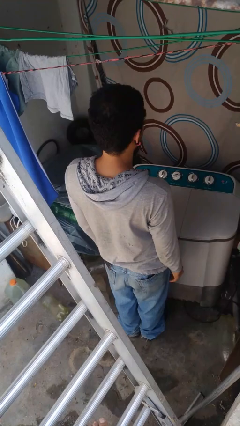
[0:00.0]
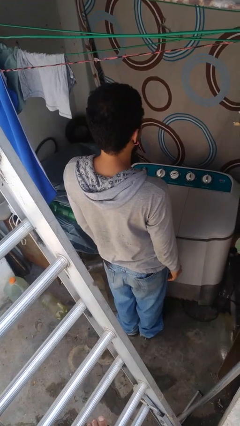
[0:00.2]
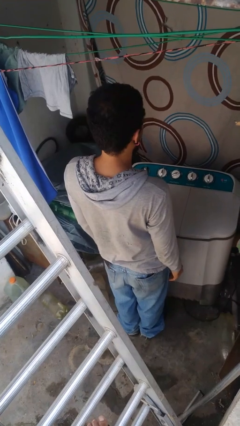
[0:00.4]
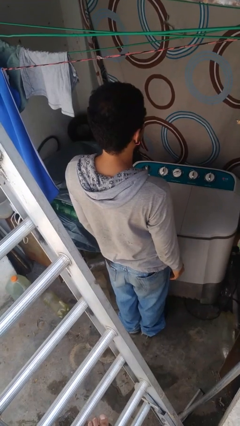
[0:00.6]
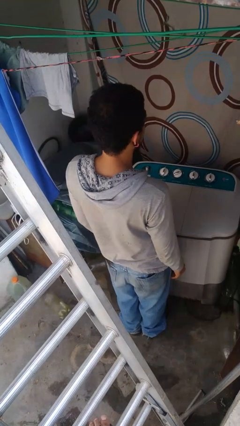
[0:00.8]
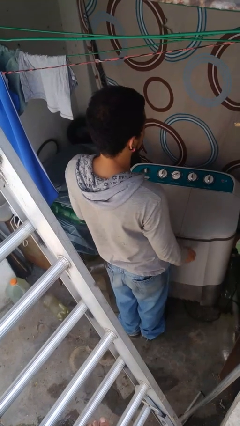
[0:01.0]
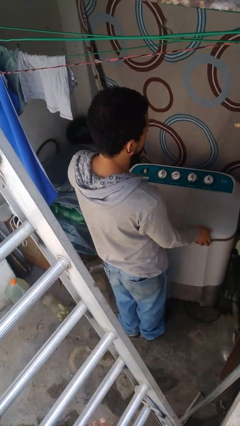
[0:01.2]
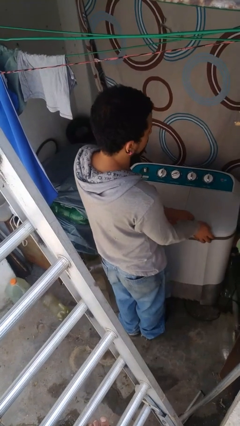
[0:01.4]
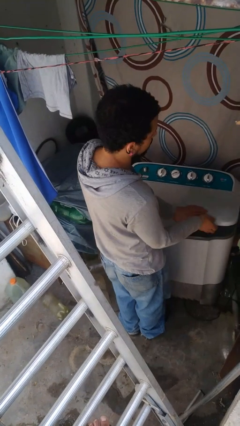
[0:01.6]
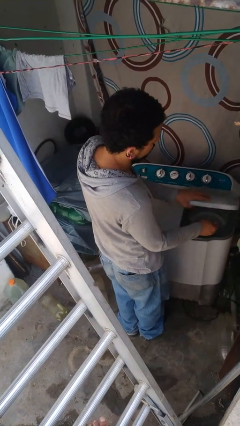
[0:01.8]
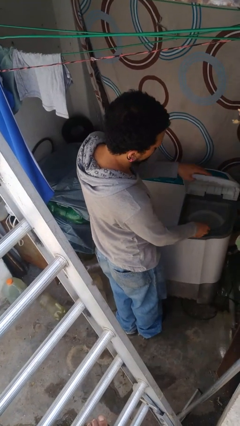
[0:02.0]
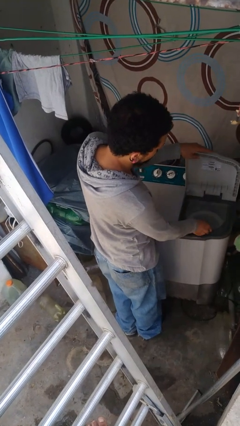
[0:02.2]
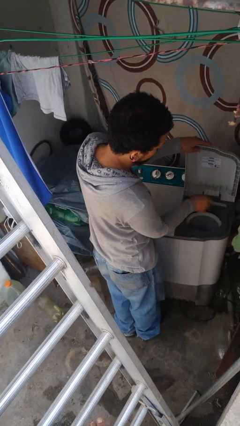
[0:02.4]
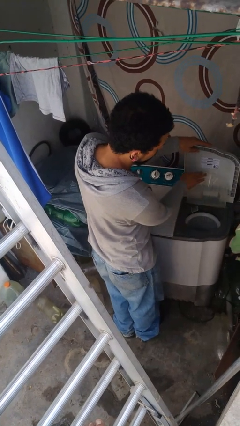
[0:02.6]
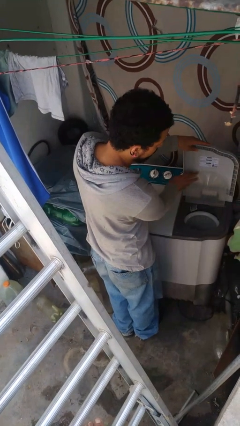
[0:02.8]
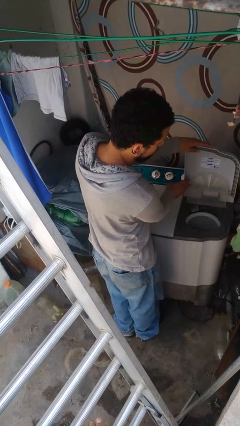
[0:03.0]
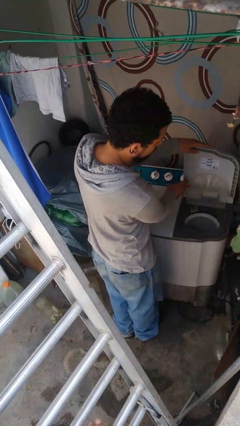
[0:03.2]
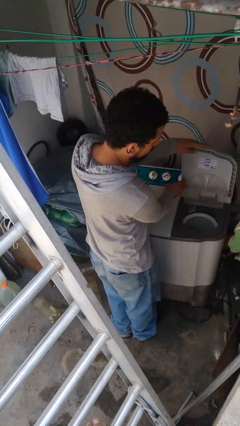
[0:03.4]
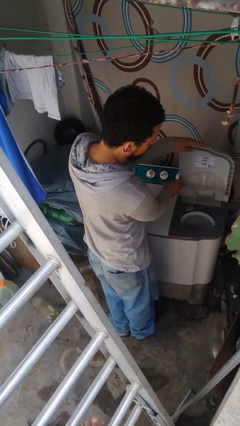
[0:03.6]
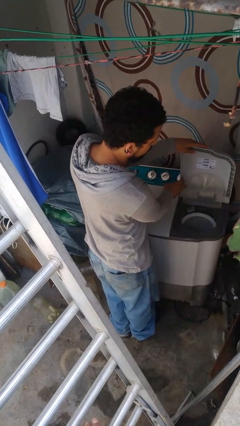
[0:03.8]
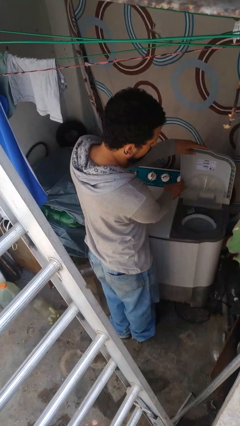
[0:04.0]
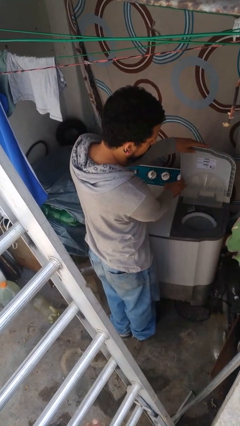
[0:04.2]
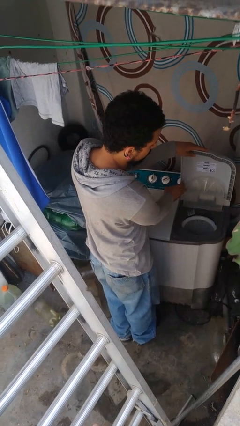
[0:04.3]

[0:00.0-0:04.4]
person opens clothes washer

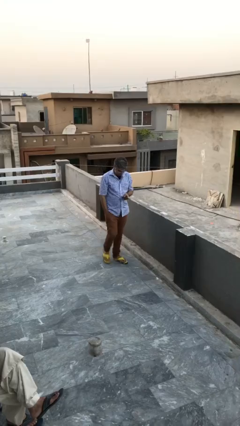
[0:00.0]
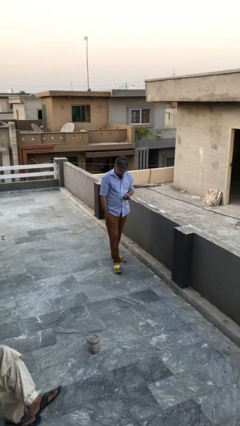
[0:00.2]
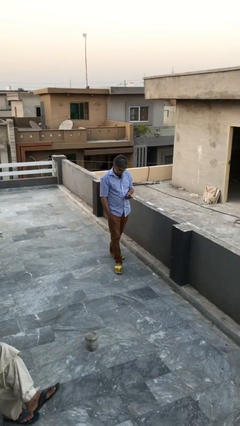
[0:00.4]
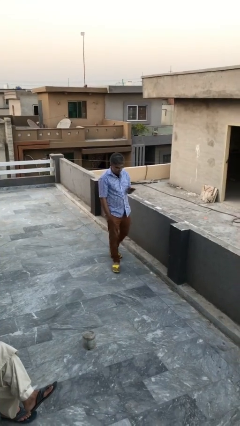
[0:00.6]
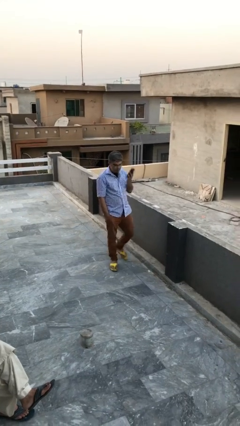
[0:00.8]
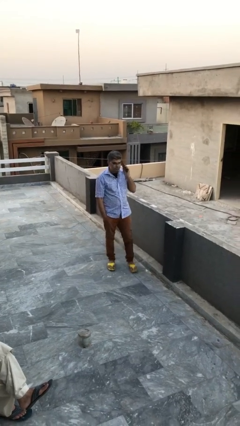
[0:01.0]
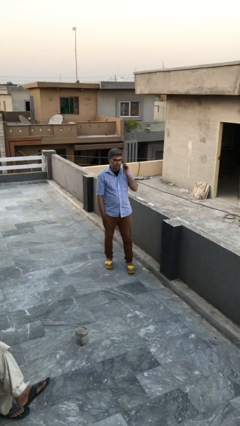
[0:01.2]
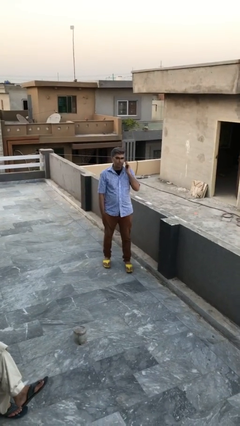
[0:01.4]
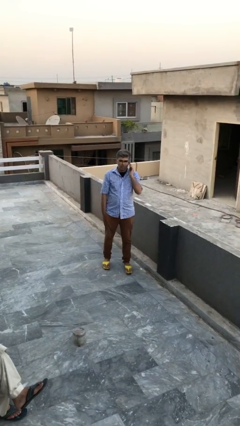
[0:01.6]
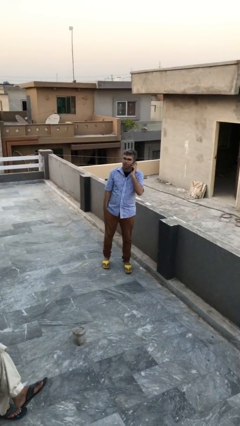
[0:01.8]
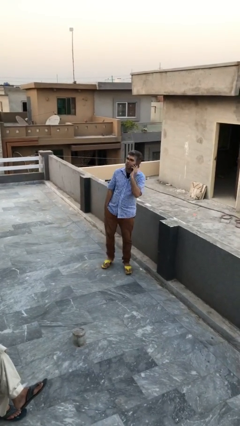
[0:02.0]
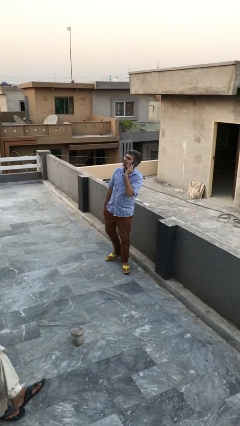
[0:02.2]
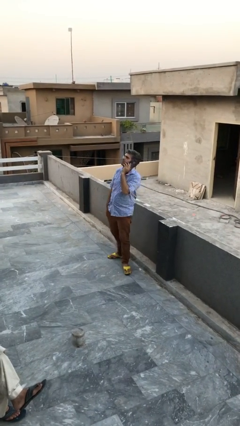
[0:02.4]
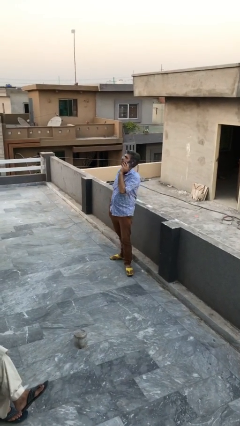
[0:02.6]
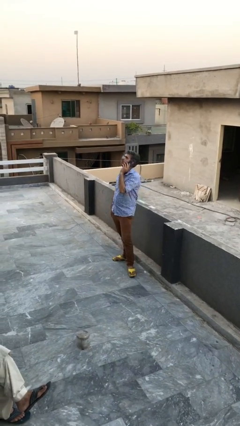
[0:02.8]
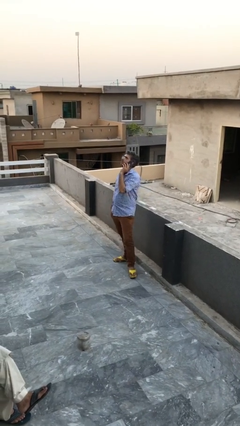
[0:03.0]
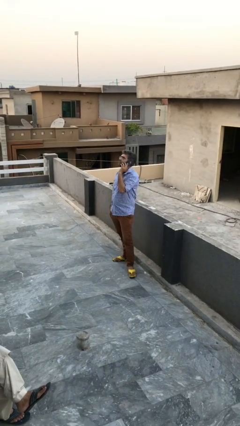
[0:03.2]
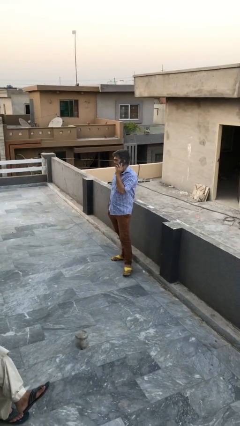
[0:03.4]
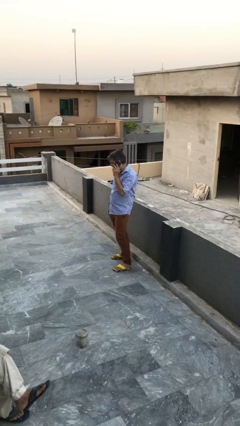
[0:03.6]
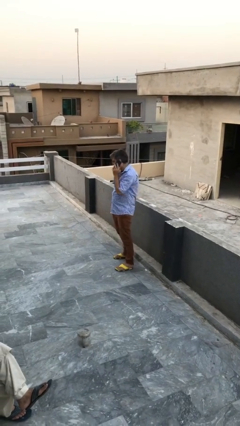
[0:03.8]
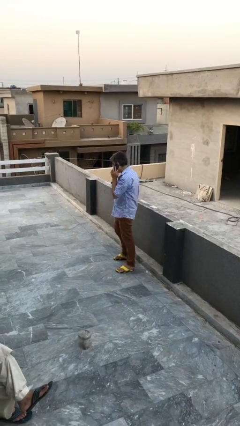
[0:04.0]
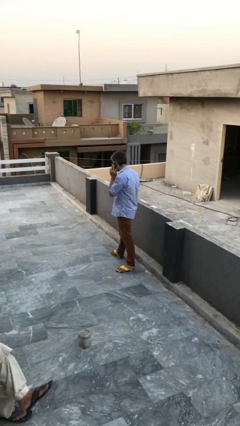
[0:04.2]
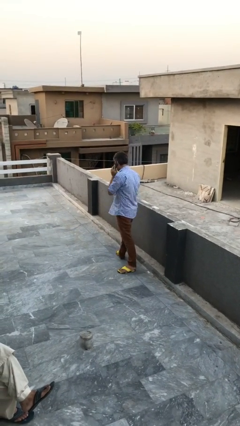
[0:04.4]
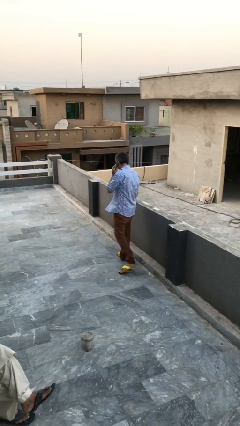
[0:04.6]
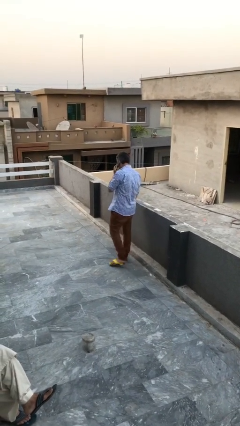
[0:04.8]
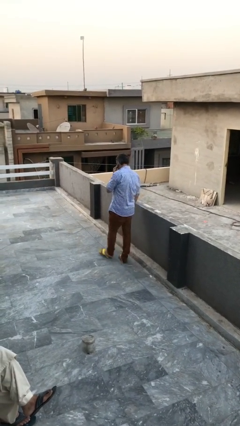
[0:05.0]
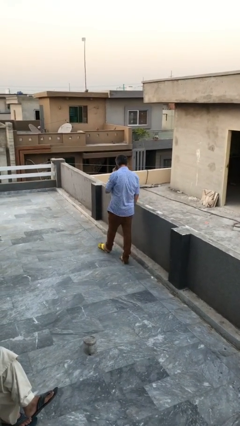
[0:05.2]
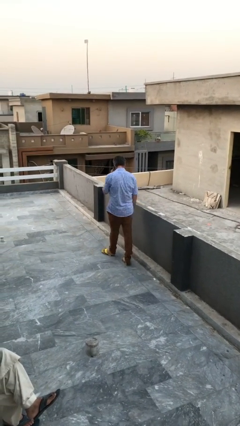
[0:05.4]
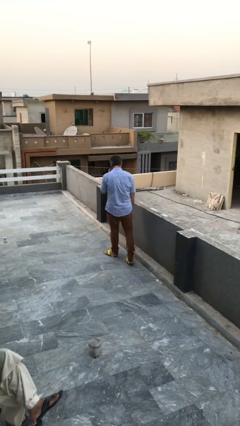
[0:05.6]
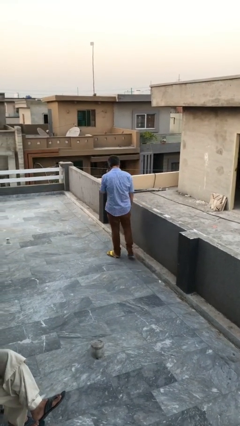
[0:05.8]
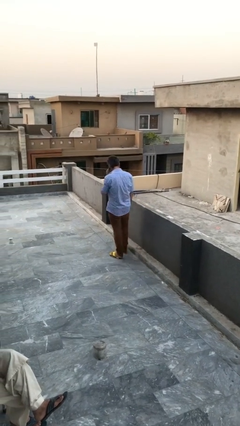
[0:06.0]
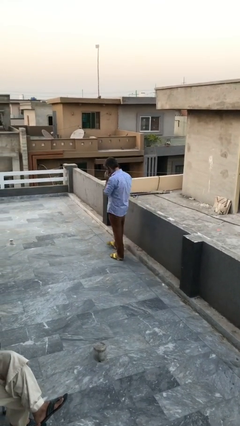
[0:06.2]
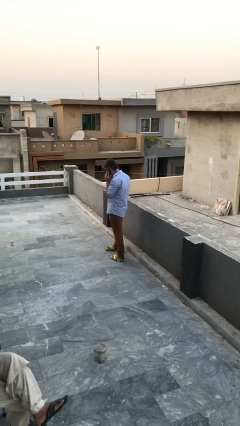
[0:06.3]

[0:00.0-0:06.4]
person talks on phone

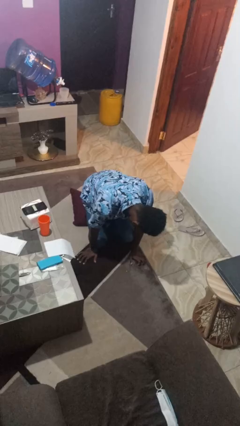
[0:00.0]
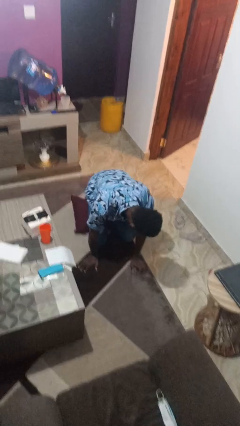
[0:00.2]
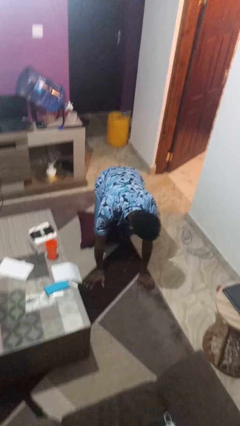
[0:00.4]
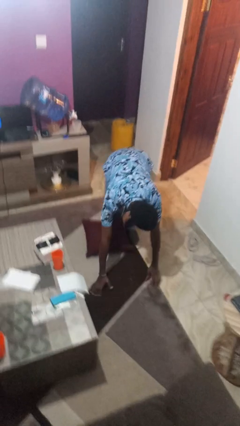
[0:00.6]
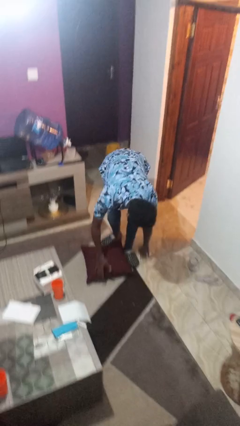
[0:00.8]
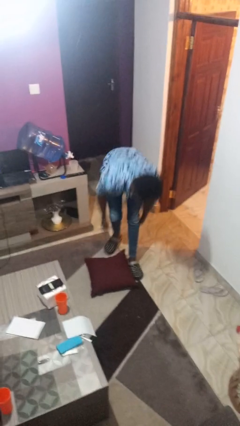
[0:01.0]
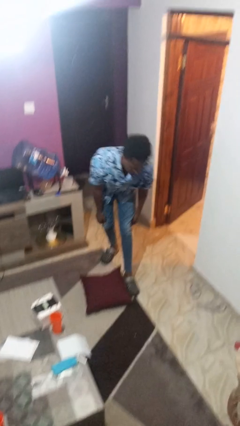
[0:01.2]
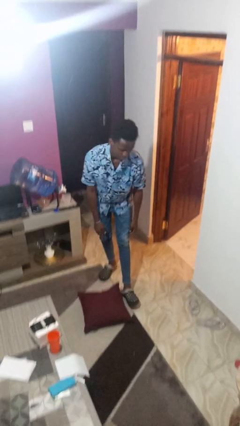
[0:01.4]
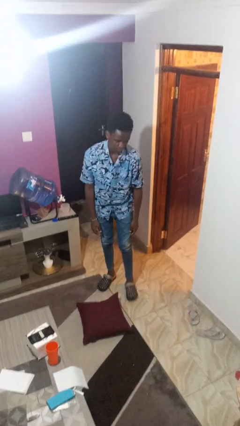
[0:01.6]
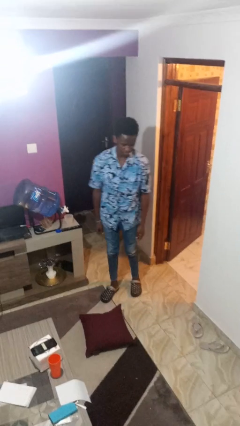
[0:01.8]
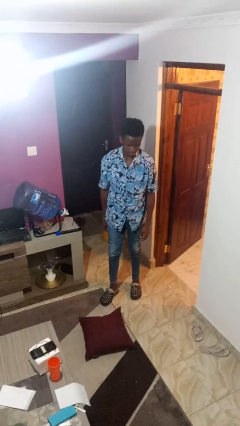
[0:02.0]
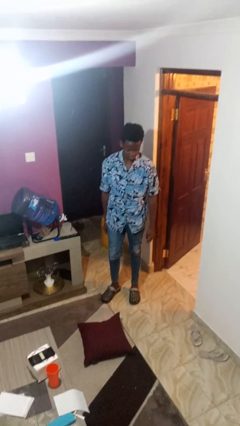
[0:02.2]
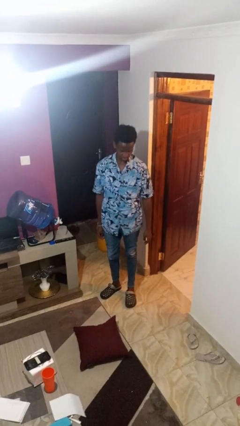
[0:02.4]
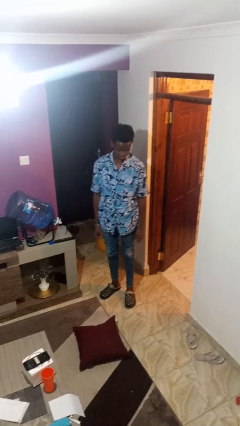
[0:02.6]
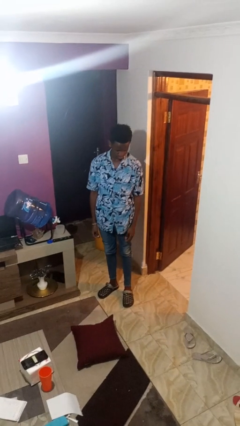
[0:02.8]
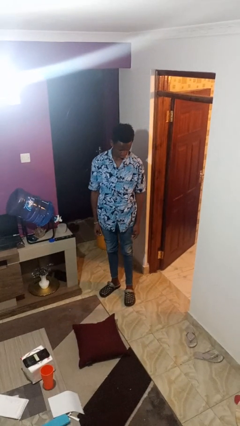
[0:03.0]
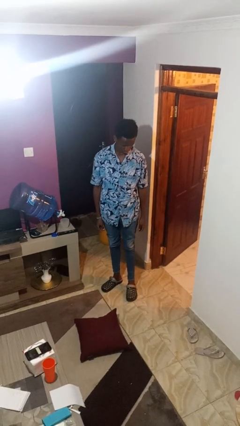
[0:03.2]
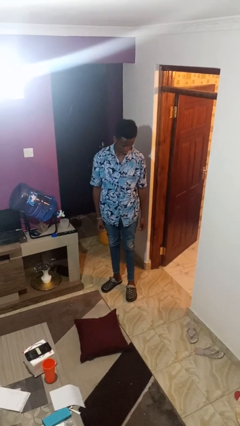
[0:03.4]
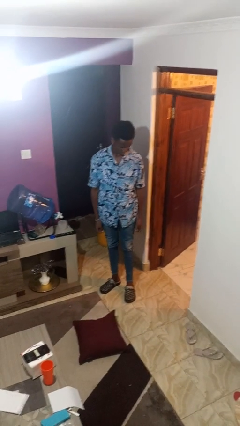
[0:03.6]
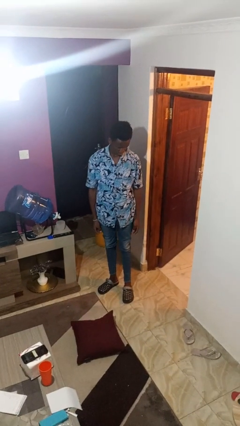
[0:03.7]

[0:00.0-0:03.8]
person stands up from floor

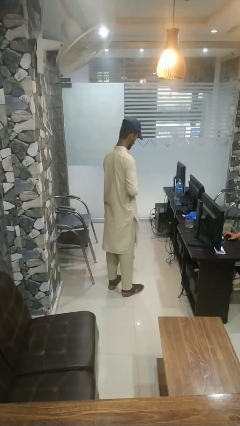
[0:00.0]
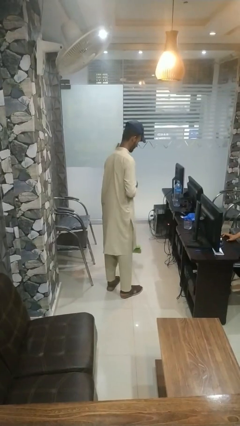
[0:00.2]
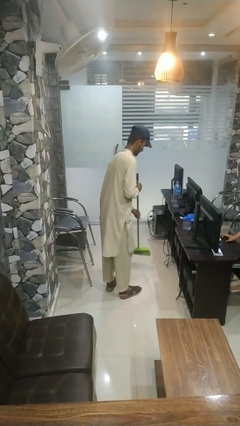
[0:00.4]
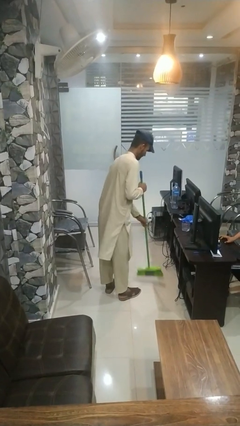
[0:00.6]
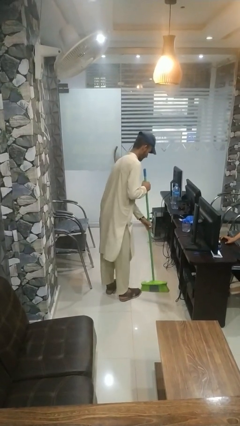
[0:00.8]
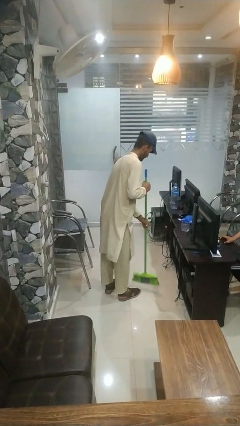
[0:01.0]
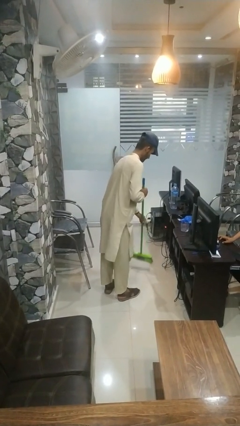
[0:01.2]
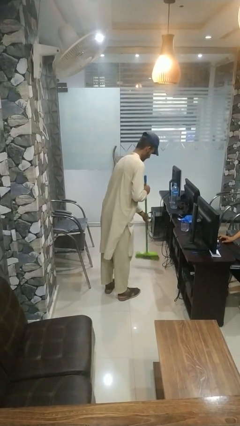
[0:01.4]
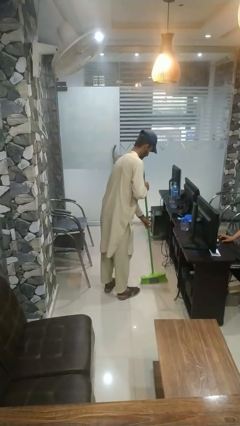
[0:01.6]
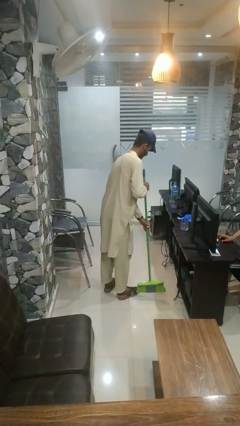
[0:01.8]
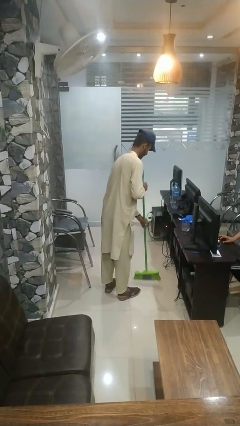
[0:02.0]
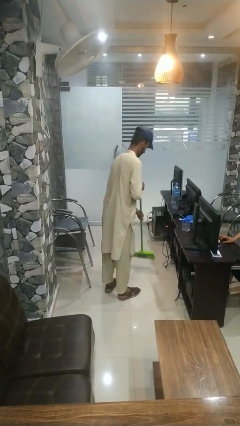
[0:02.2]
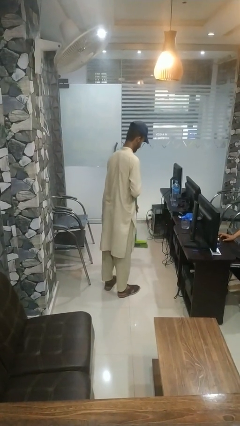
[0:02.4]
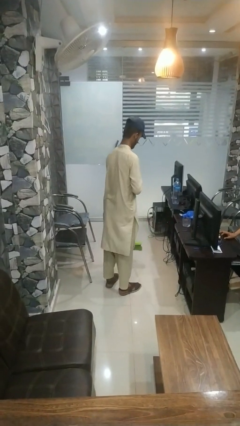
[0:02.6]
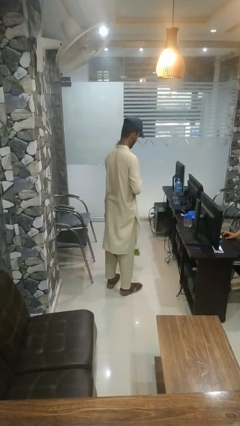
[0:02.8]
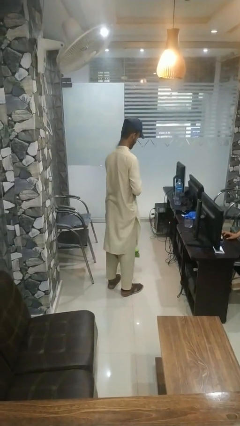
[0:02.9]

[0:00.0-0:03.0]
person sweeps floor
